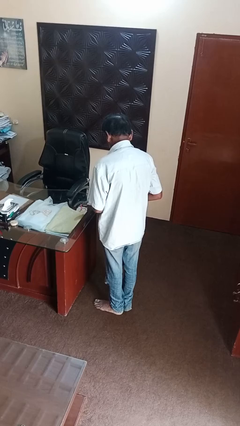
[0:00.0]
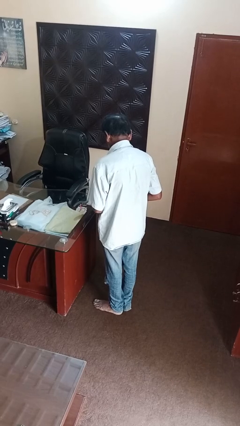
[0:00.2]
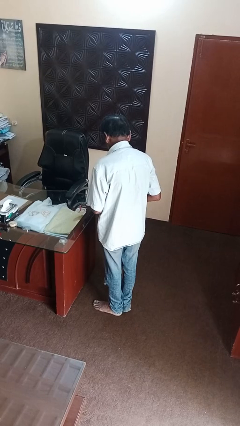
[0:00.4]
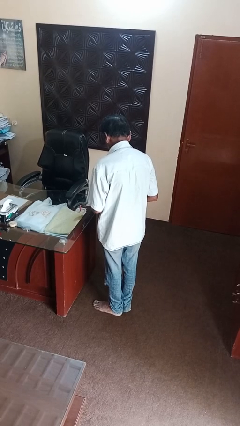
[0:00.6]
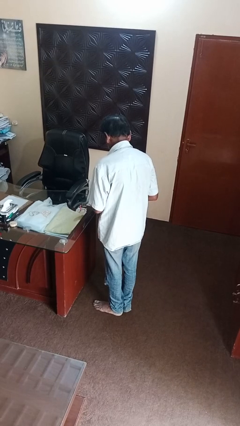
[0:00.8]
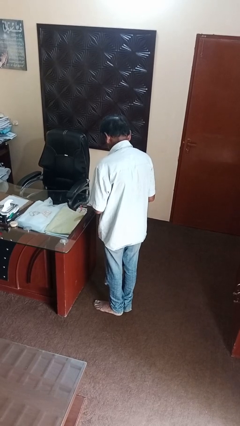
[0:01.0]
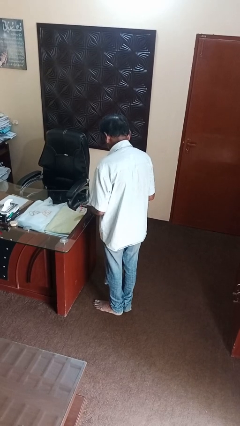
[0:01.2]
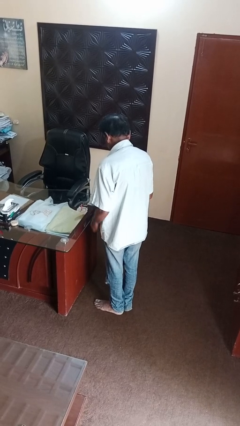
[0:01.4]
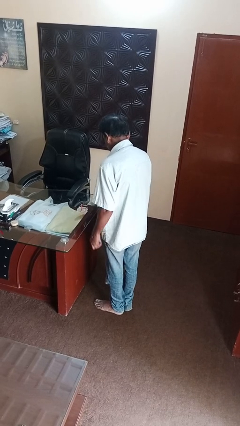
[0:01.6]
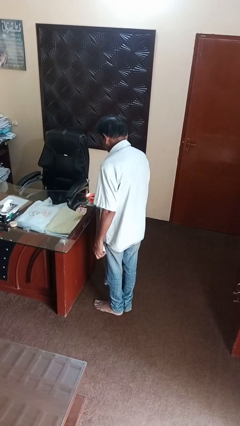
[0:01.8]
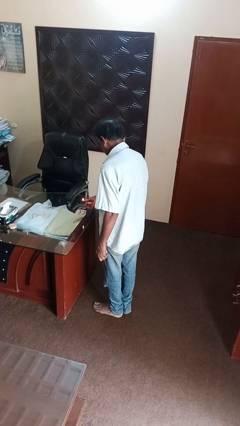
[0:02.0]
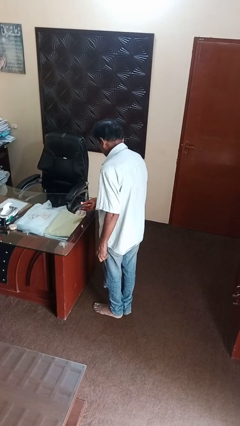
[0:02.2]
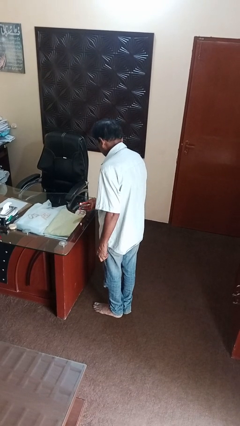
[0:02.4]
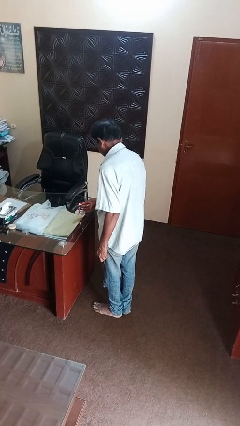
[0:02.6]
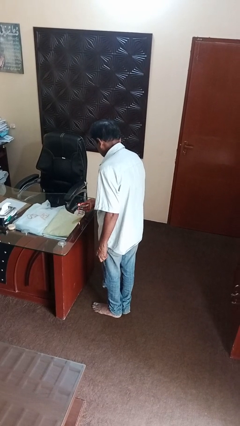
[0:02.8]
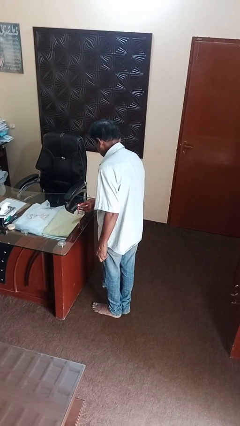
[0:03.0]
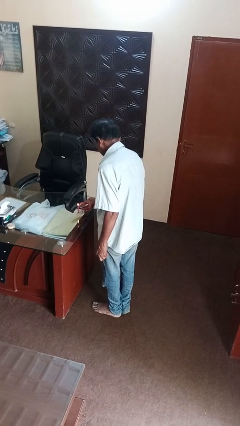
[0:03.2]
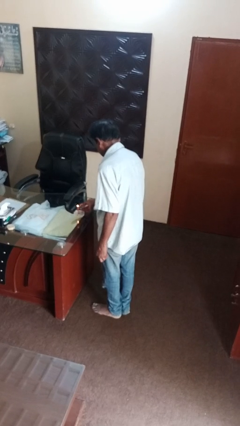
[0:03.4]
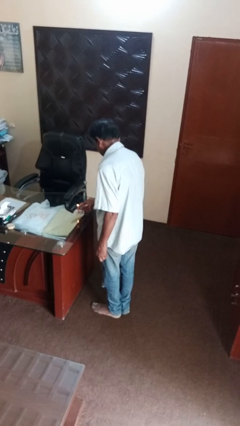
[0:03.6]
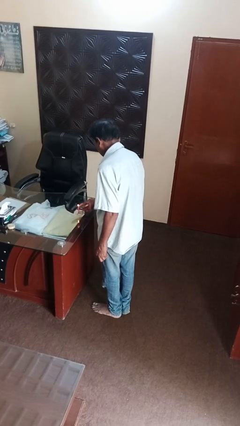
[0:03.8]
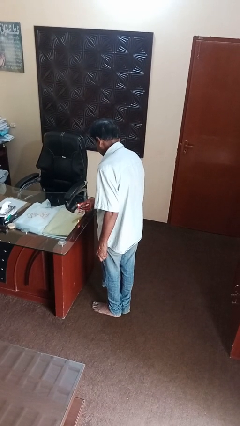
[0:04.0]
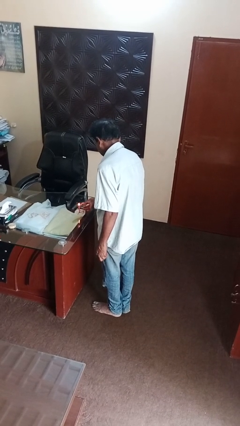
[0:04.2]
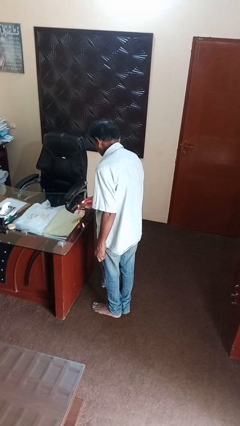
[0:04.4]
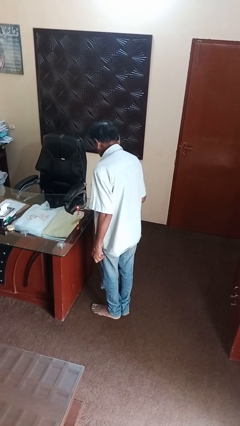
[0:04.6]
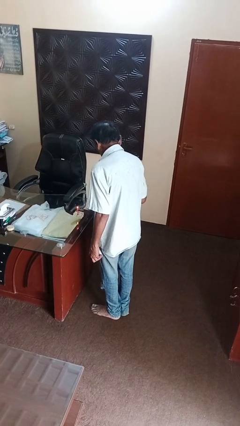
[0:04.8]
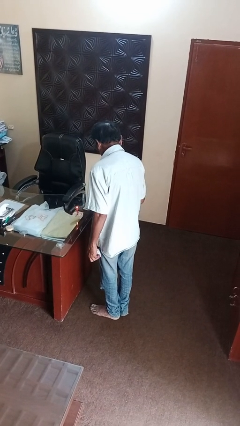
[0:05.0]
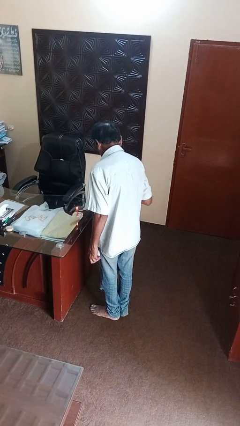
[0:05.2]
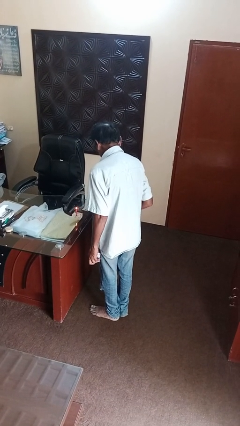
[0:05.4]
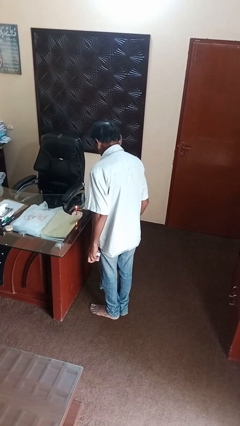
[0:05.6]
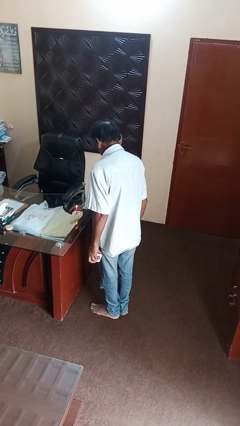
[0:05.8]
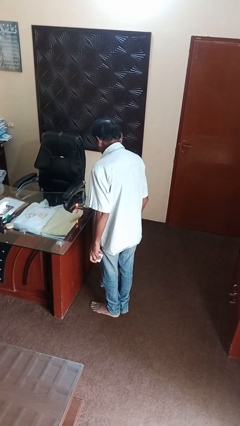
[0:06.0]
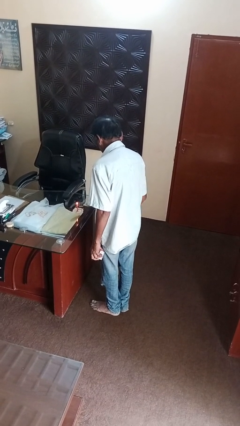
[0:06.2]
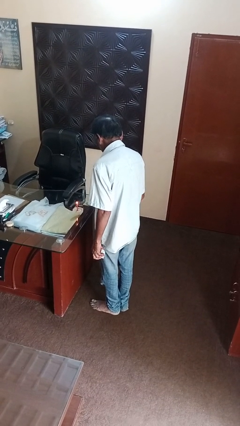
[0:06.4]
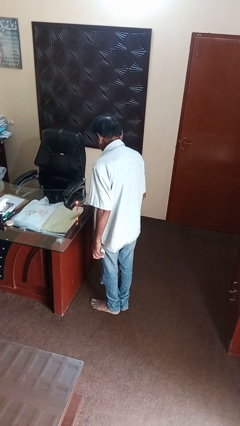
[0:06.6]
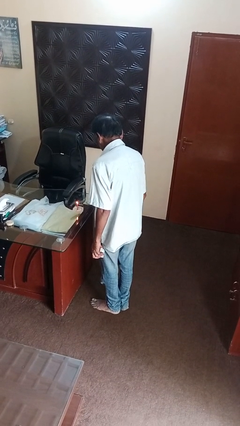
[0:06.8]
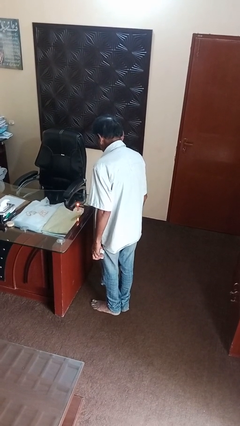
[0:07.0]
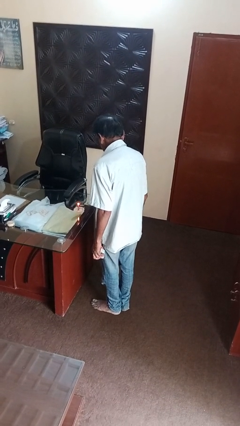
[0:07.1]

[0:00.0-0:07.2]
person lights candle

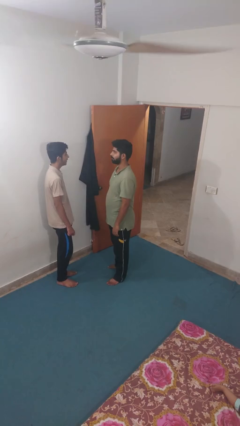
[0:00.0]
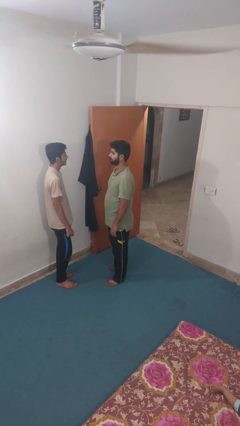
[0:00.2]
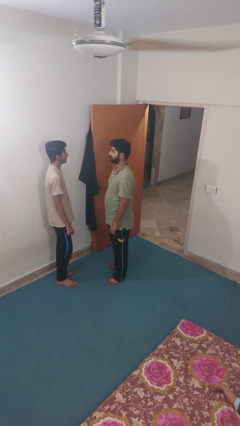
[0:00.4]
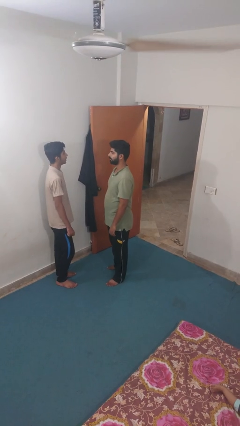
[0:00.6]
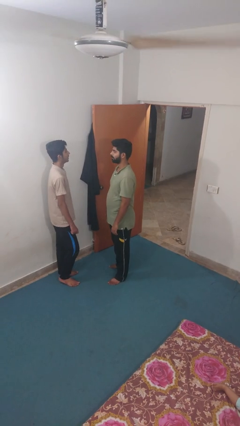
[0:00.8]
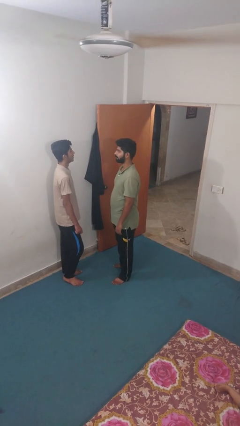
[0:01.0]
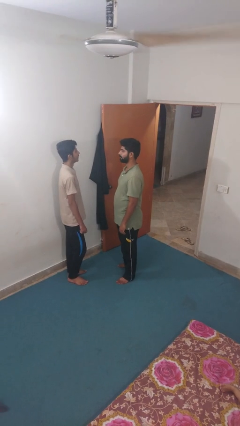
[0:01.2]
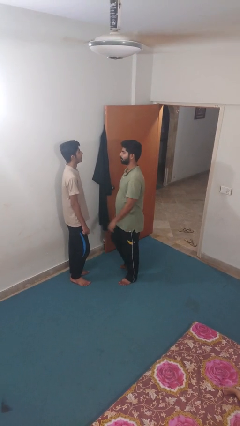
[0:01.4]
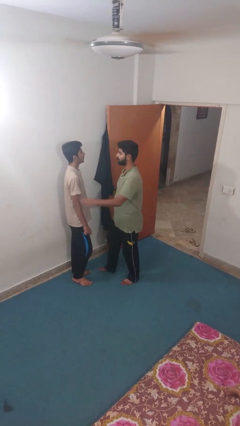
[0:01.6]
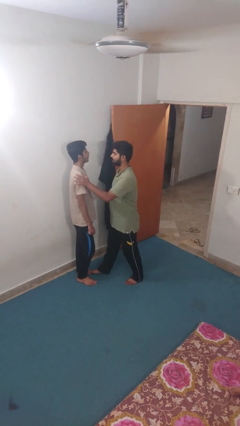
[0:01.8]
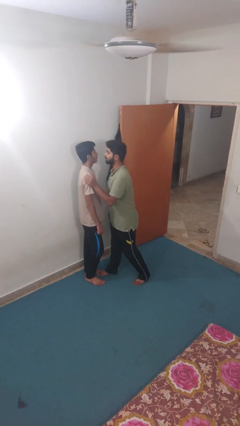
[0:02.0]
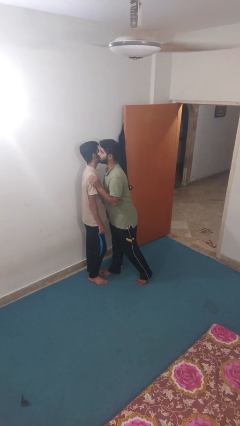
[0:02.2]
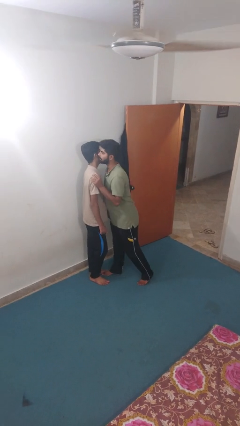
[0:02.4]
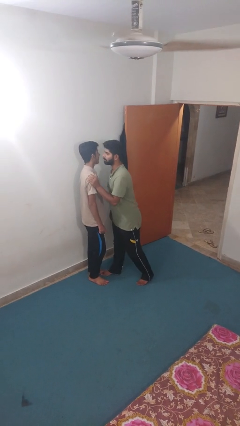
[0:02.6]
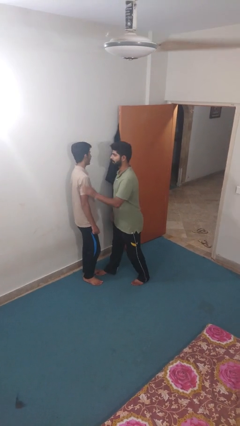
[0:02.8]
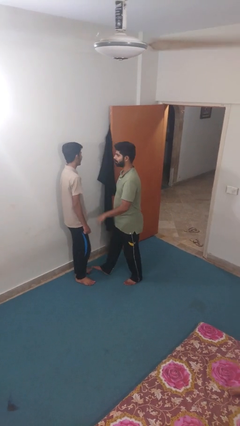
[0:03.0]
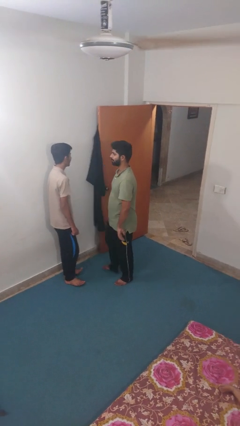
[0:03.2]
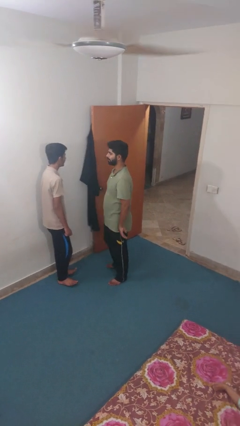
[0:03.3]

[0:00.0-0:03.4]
person kisses cheek of person

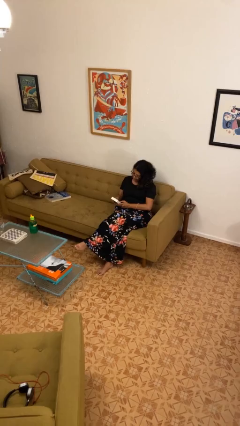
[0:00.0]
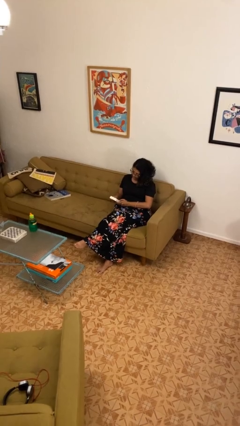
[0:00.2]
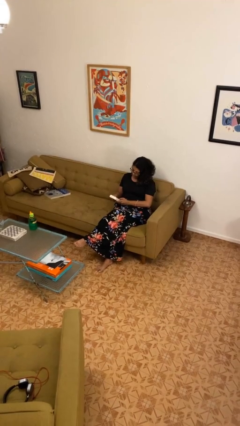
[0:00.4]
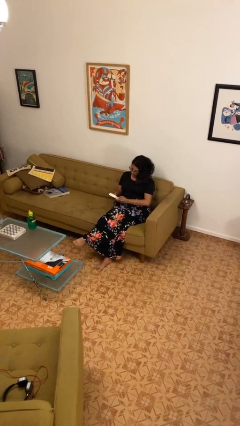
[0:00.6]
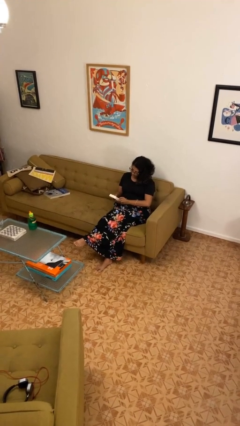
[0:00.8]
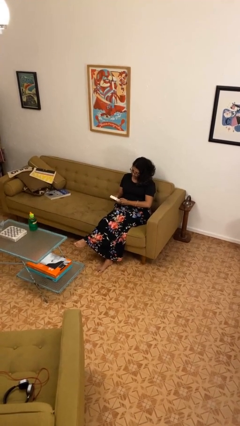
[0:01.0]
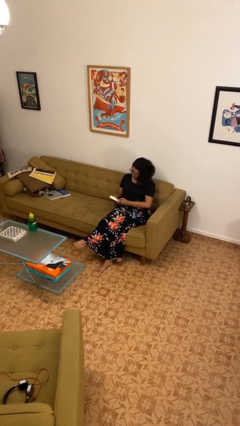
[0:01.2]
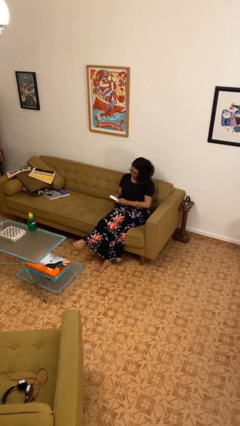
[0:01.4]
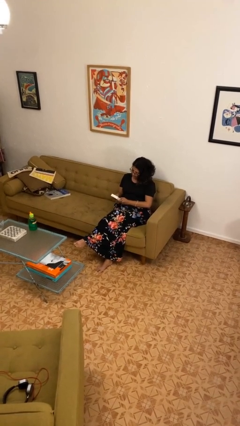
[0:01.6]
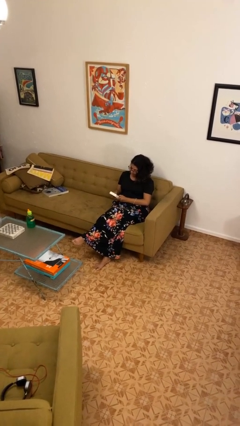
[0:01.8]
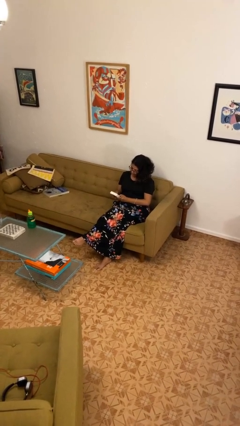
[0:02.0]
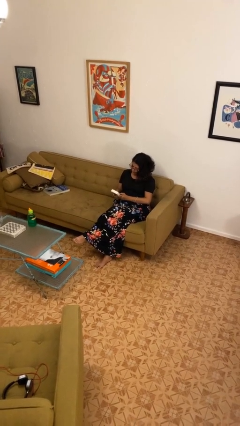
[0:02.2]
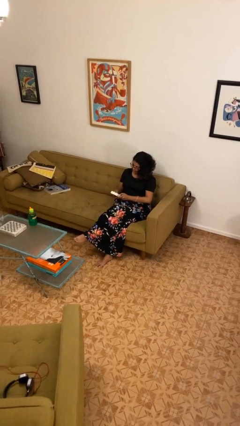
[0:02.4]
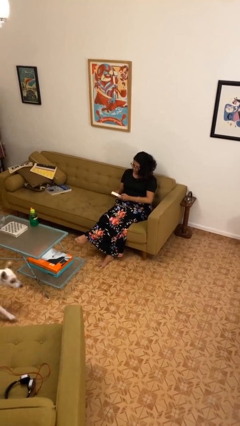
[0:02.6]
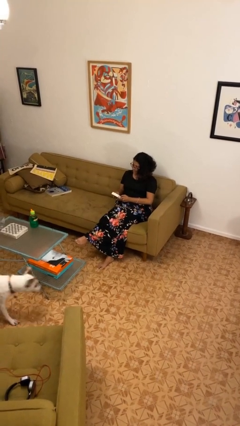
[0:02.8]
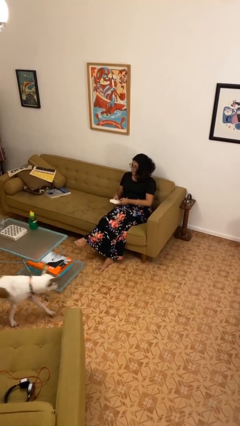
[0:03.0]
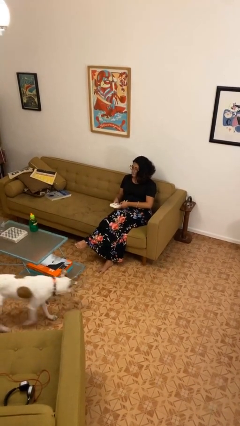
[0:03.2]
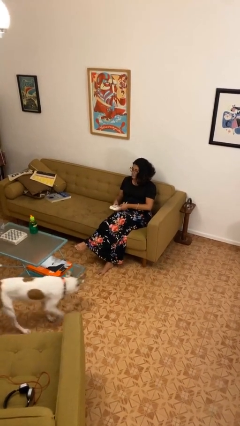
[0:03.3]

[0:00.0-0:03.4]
person interacts with handheld game

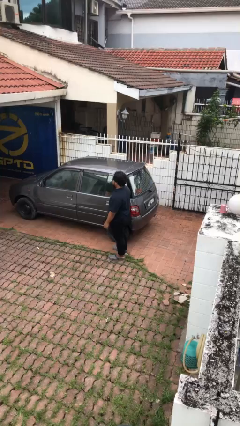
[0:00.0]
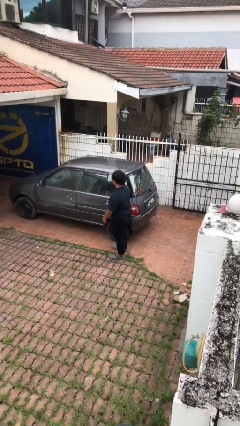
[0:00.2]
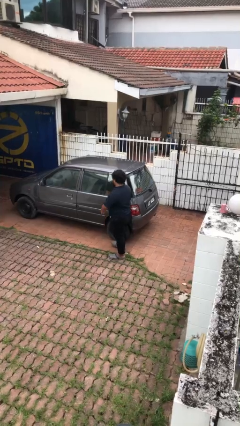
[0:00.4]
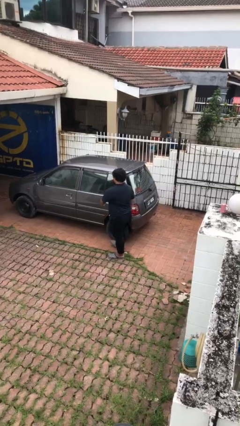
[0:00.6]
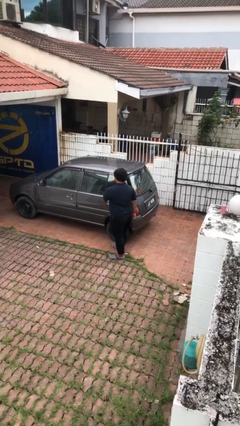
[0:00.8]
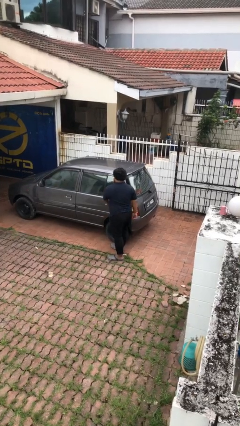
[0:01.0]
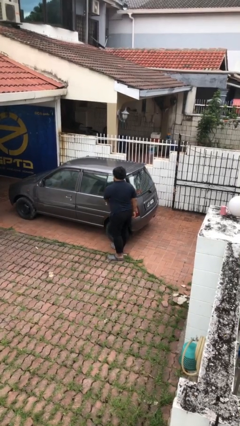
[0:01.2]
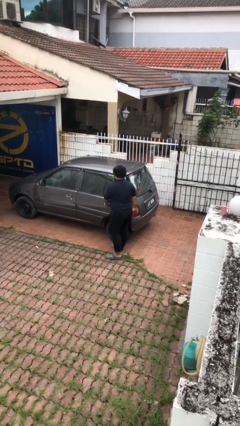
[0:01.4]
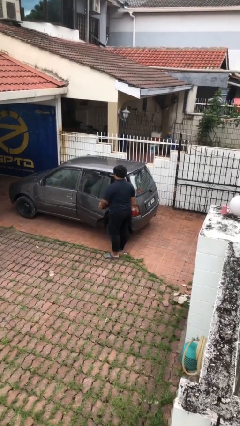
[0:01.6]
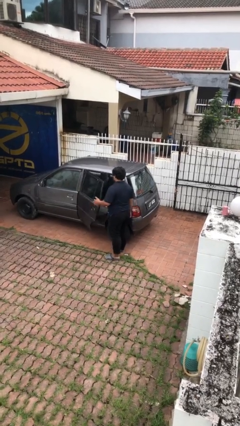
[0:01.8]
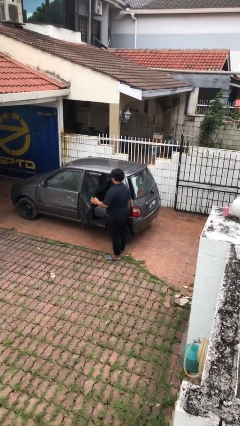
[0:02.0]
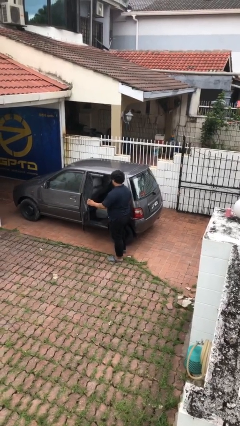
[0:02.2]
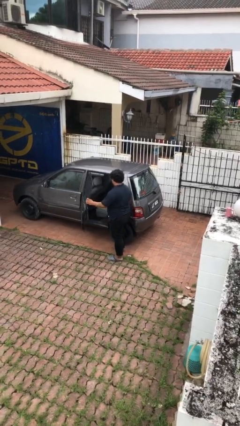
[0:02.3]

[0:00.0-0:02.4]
person opens car door

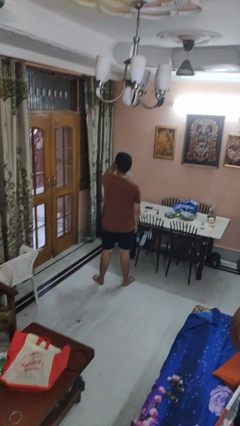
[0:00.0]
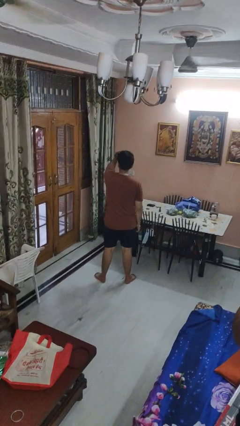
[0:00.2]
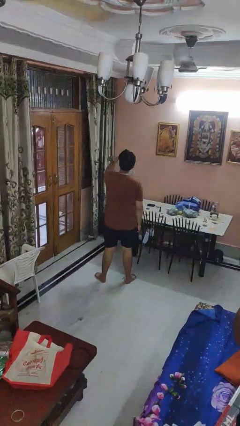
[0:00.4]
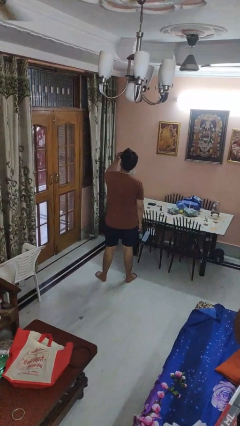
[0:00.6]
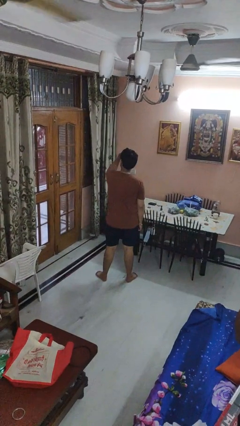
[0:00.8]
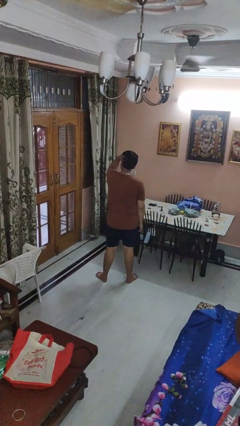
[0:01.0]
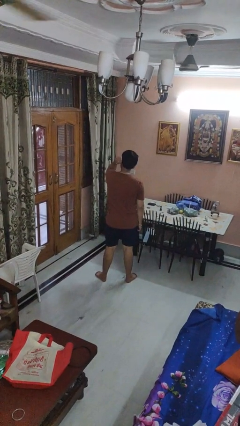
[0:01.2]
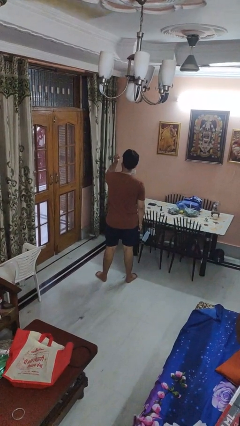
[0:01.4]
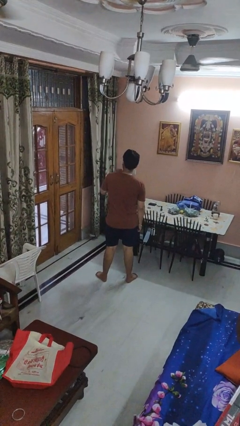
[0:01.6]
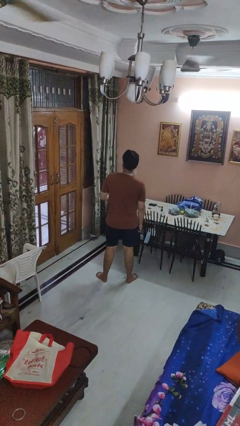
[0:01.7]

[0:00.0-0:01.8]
person strokes hair
